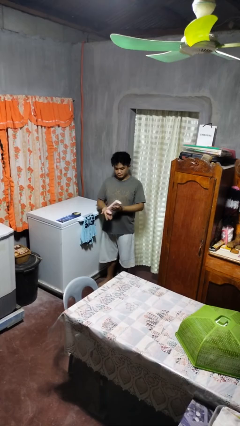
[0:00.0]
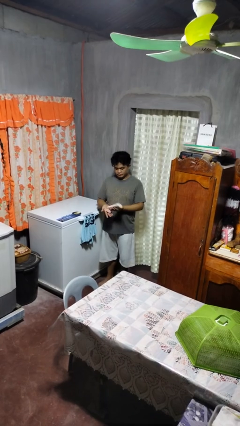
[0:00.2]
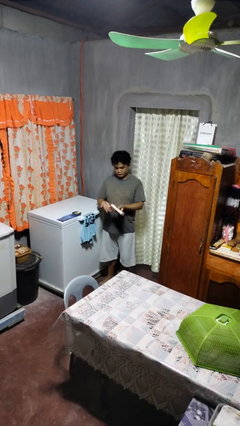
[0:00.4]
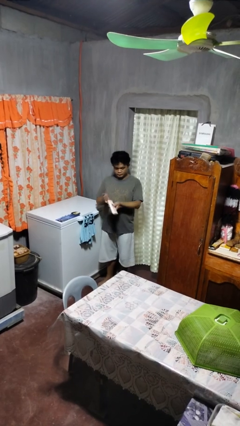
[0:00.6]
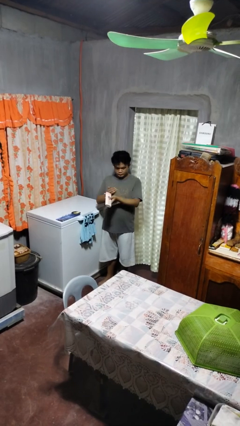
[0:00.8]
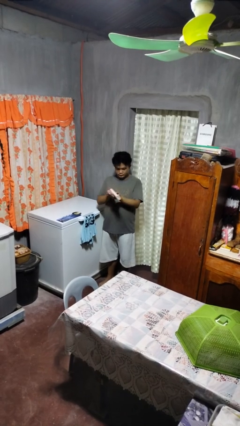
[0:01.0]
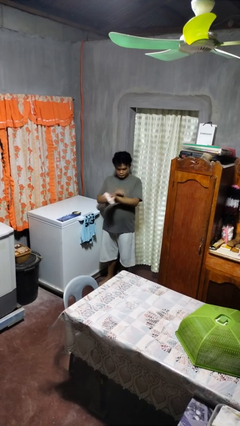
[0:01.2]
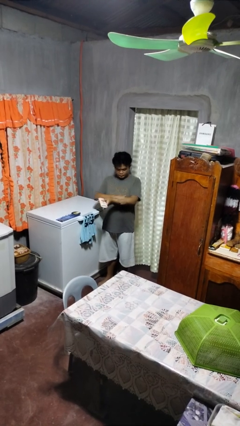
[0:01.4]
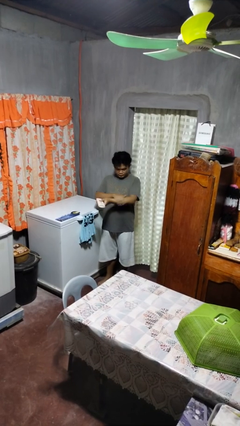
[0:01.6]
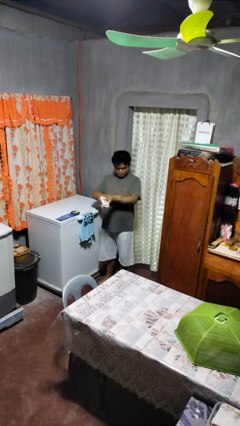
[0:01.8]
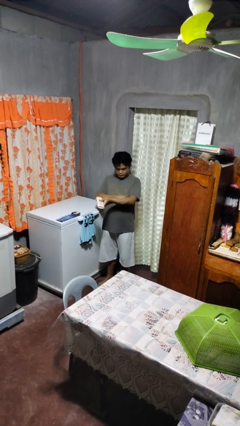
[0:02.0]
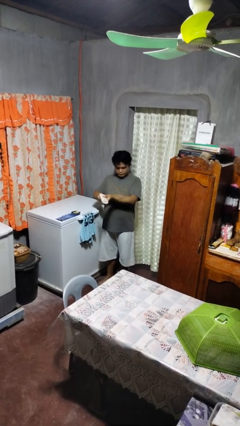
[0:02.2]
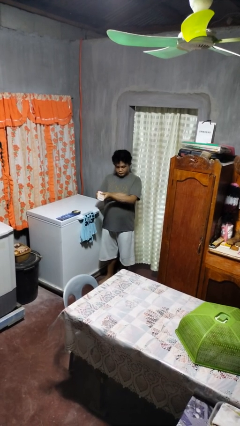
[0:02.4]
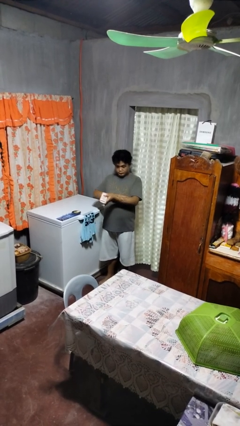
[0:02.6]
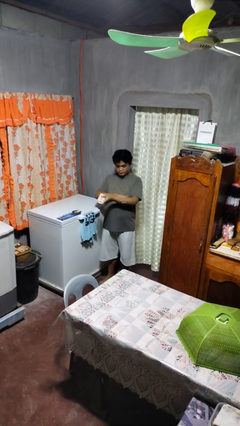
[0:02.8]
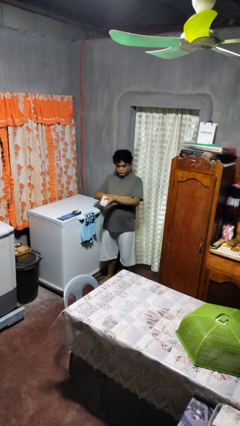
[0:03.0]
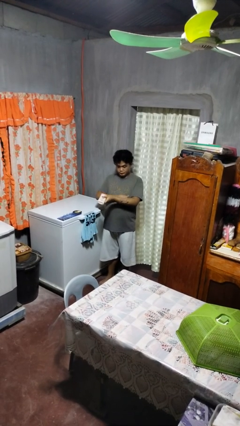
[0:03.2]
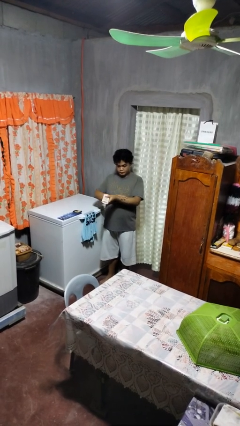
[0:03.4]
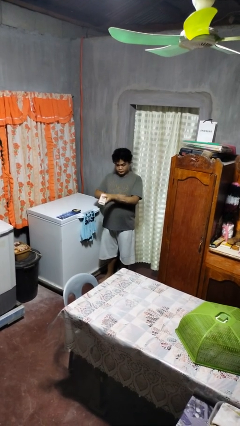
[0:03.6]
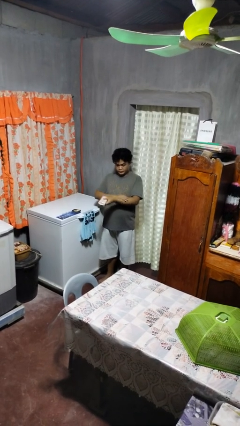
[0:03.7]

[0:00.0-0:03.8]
person applies sunscreen

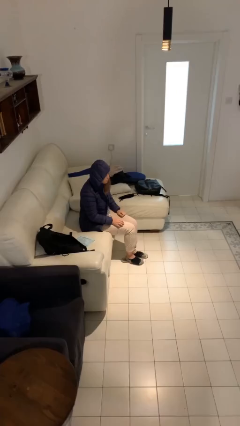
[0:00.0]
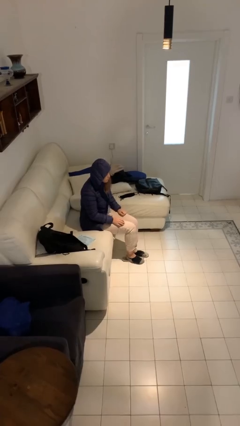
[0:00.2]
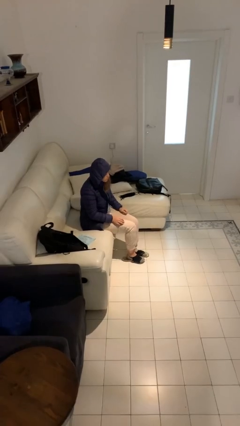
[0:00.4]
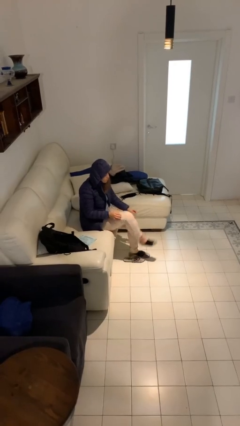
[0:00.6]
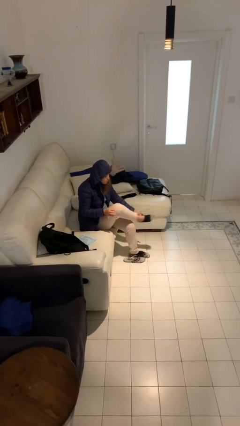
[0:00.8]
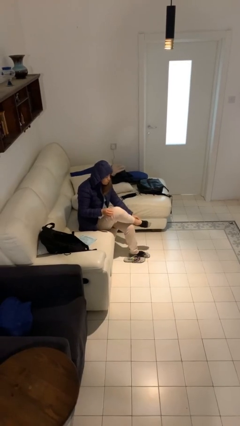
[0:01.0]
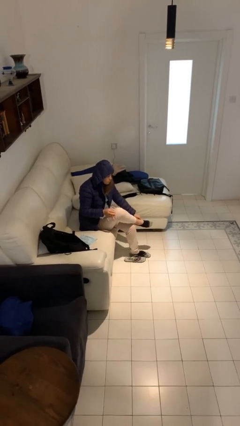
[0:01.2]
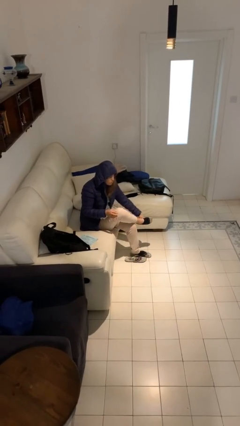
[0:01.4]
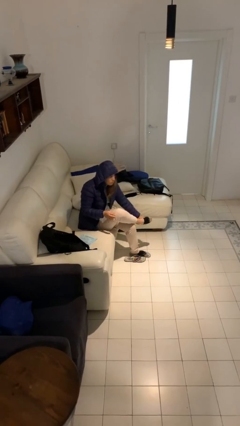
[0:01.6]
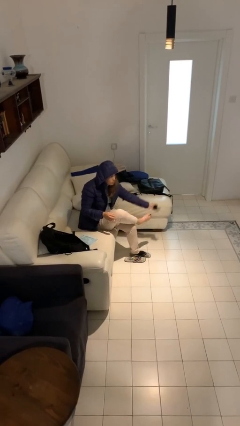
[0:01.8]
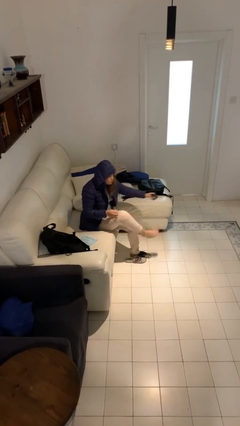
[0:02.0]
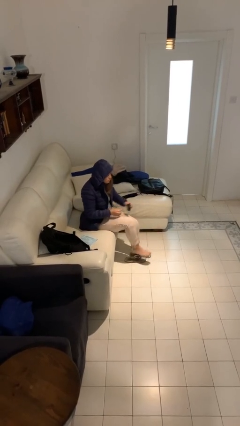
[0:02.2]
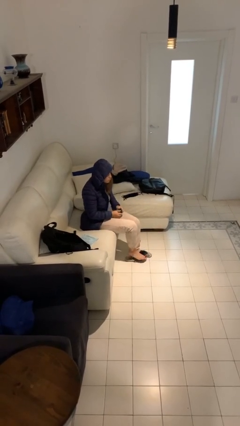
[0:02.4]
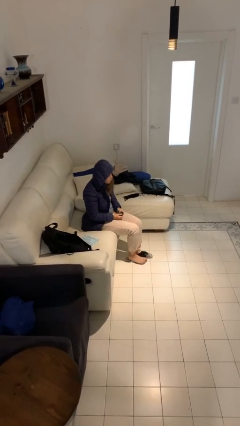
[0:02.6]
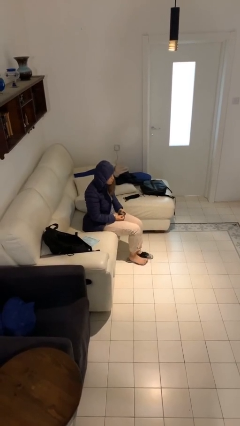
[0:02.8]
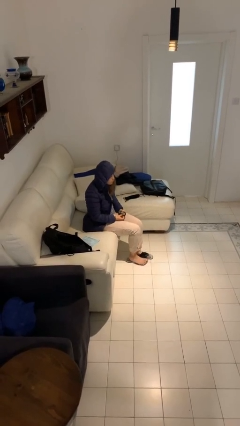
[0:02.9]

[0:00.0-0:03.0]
person takes off socks

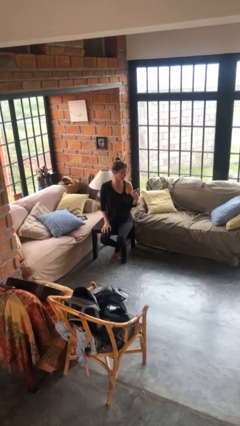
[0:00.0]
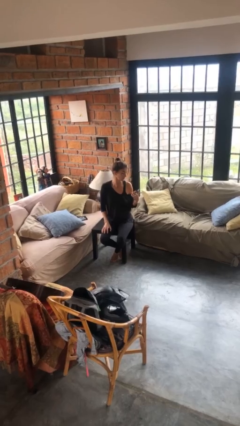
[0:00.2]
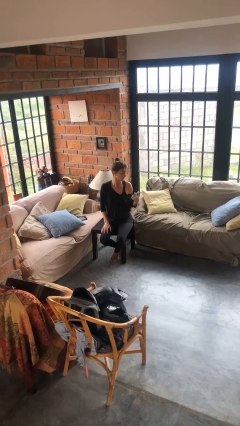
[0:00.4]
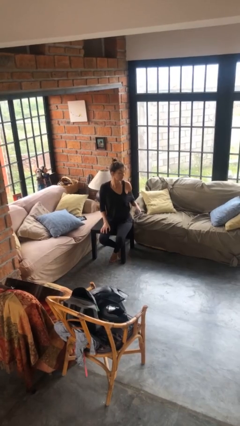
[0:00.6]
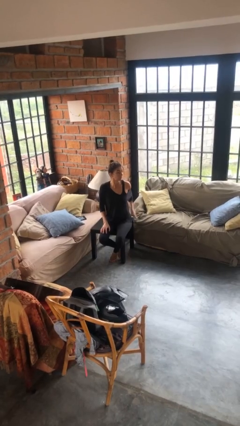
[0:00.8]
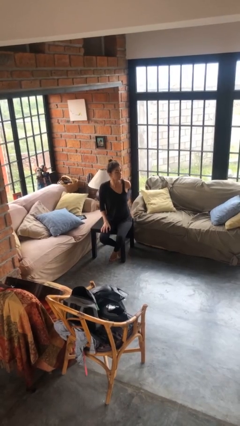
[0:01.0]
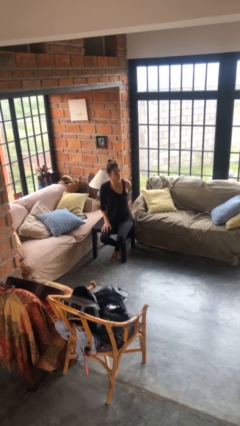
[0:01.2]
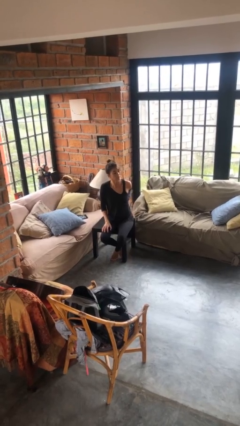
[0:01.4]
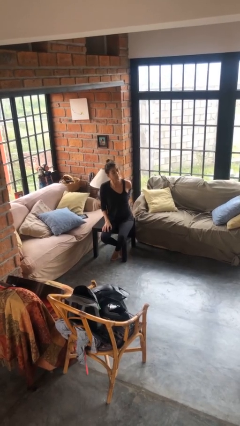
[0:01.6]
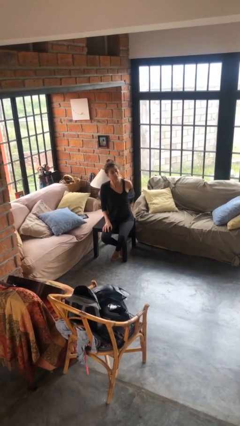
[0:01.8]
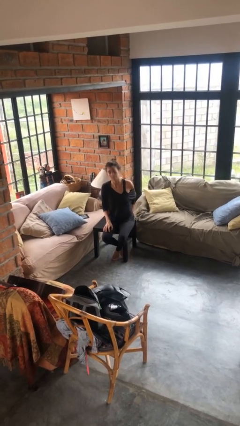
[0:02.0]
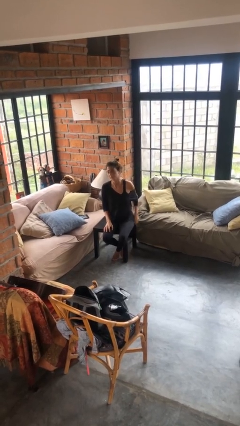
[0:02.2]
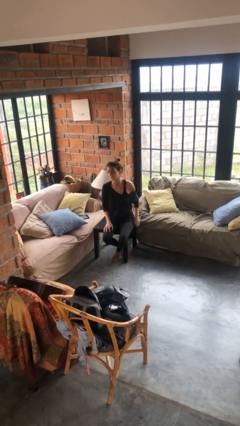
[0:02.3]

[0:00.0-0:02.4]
person puts phone into pocket

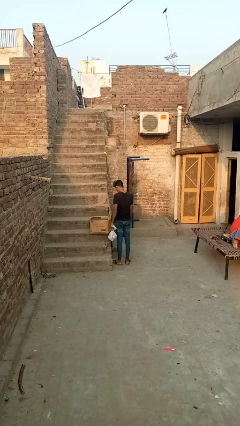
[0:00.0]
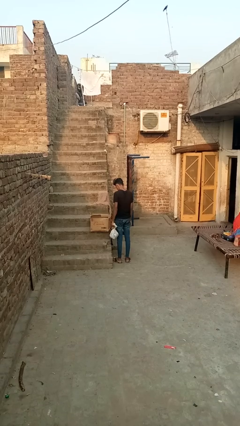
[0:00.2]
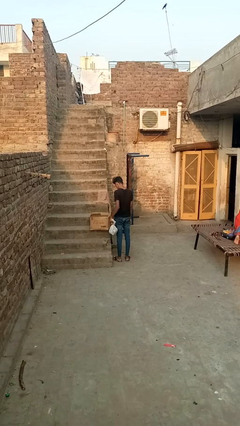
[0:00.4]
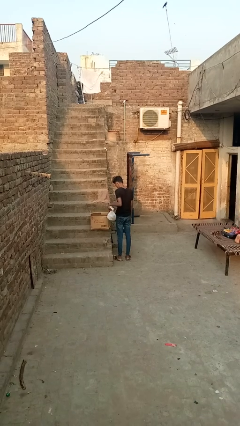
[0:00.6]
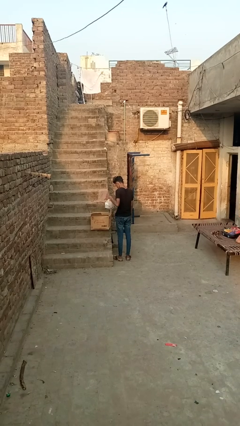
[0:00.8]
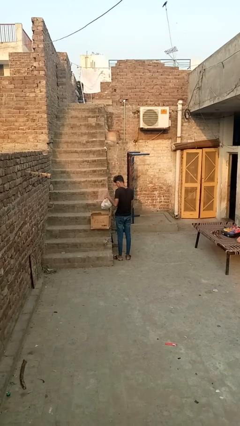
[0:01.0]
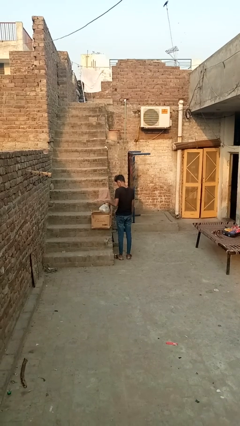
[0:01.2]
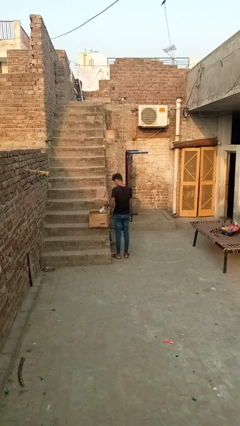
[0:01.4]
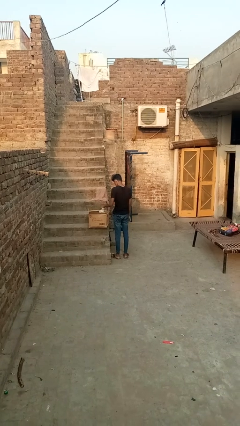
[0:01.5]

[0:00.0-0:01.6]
person puts object into box

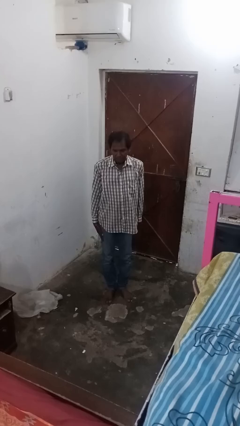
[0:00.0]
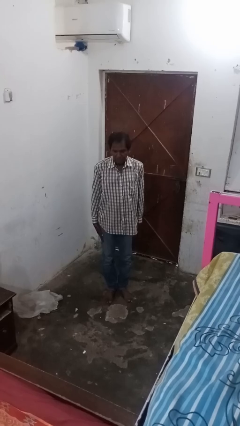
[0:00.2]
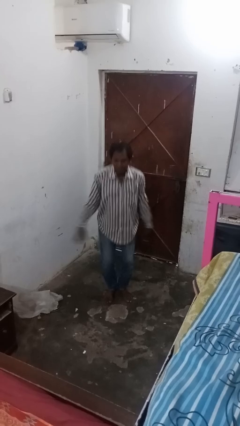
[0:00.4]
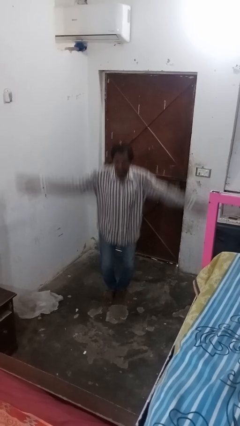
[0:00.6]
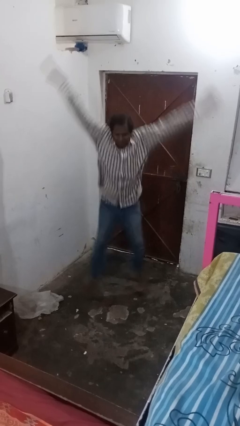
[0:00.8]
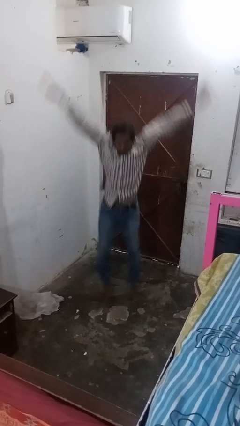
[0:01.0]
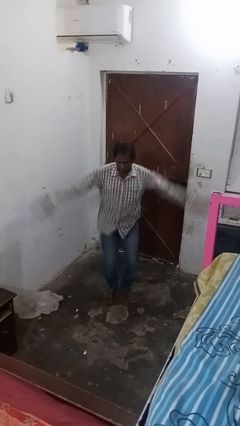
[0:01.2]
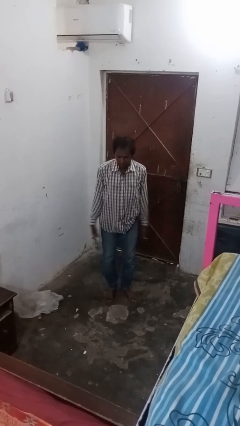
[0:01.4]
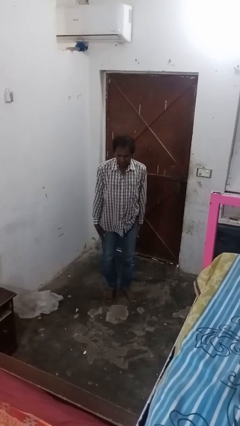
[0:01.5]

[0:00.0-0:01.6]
person exercises with jumping jacks

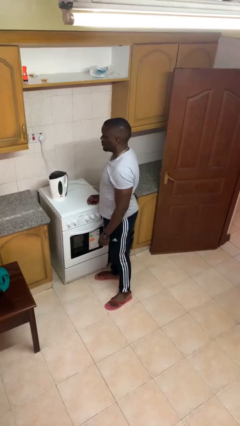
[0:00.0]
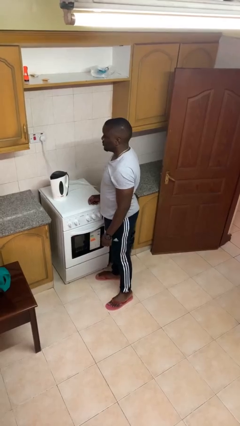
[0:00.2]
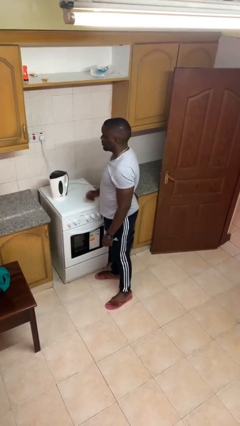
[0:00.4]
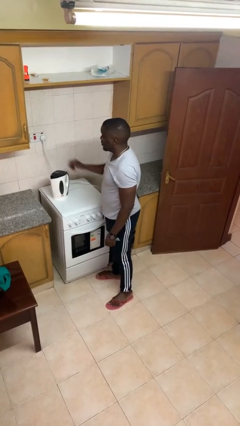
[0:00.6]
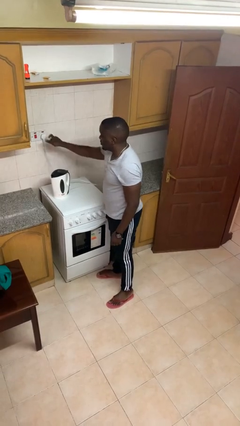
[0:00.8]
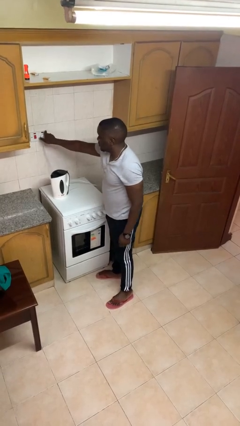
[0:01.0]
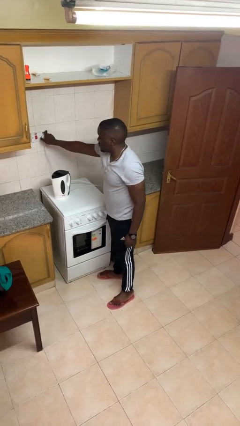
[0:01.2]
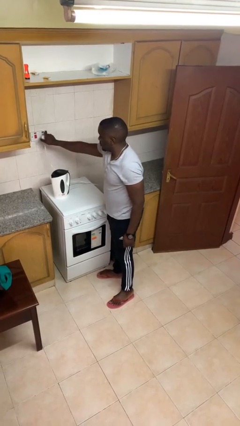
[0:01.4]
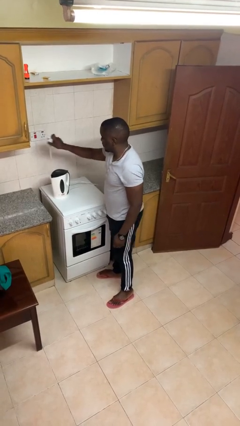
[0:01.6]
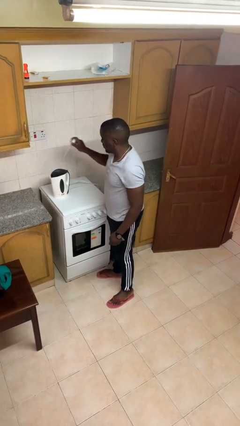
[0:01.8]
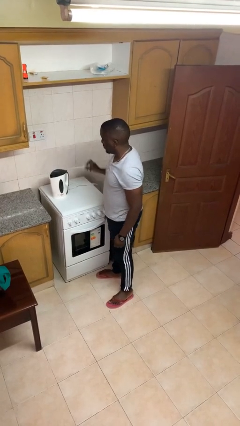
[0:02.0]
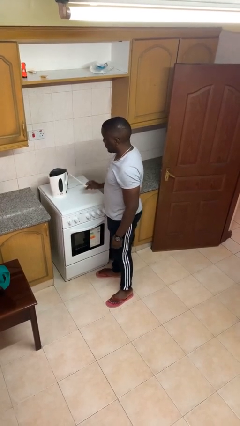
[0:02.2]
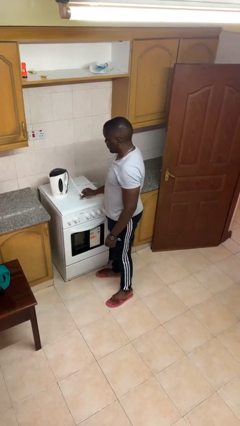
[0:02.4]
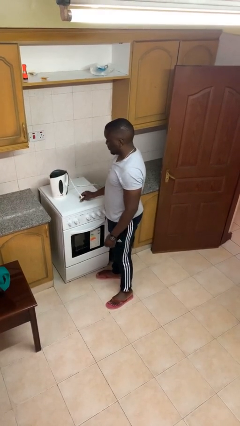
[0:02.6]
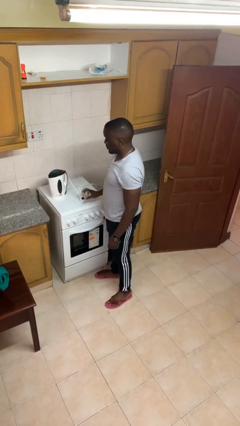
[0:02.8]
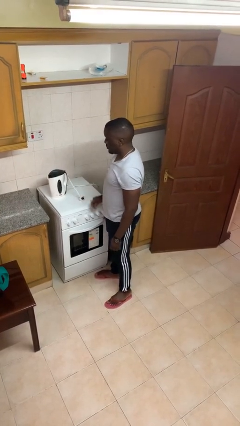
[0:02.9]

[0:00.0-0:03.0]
person unplugs from electrical socket

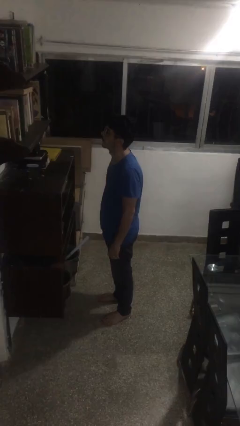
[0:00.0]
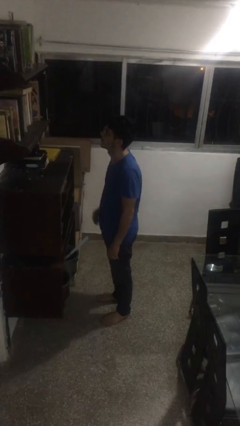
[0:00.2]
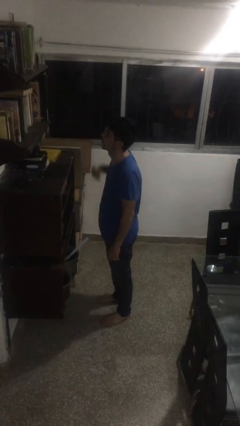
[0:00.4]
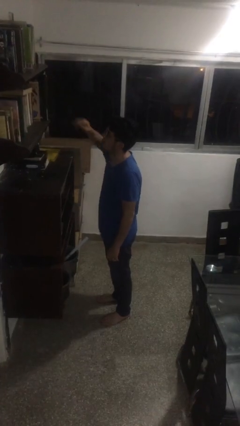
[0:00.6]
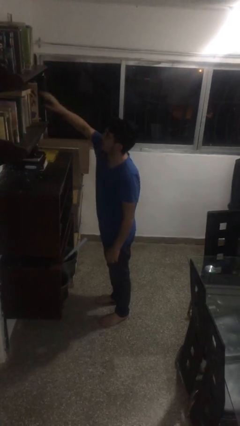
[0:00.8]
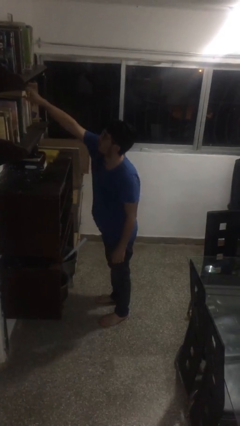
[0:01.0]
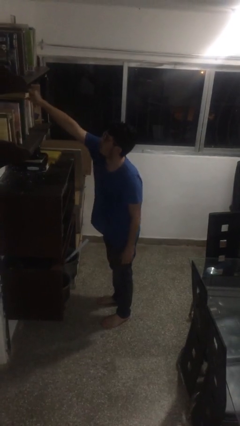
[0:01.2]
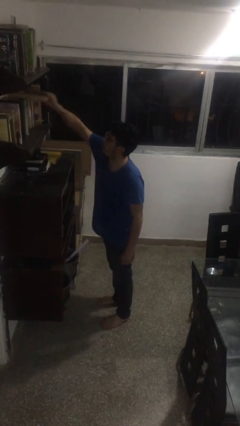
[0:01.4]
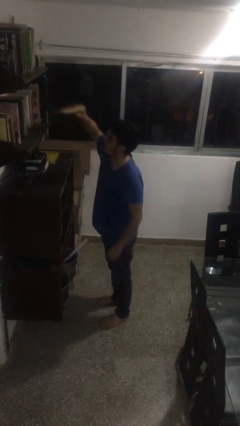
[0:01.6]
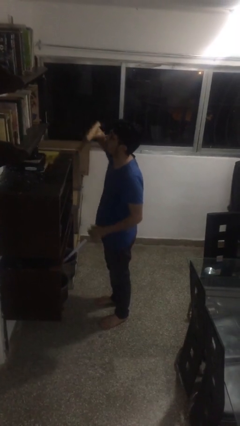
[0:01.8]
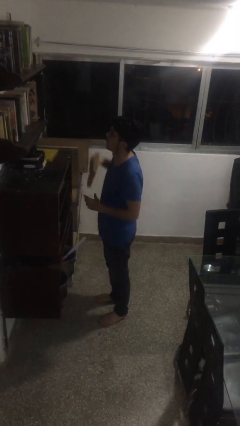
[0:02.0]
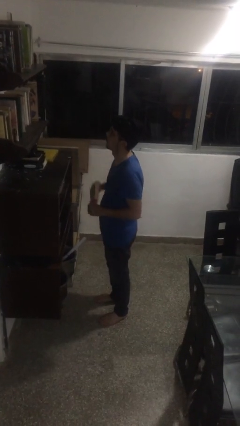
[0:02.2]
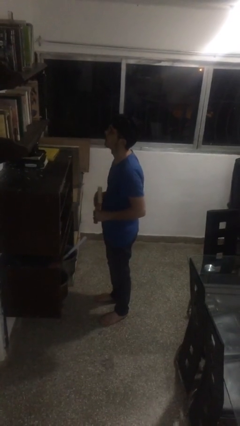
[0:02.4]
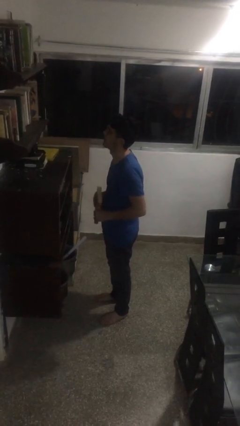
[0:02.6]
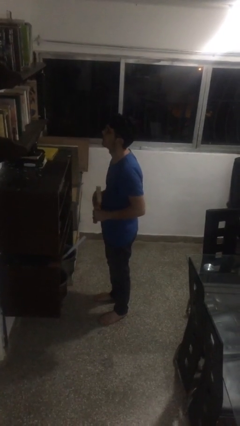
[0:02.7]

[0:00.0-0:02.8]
person picks up object from shelf
